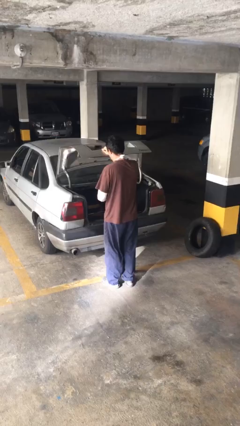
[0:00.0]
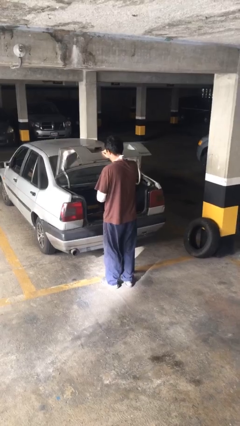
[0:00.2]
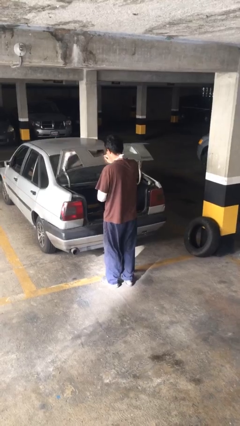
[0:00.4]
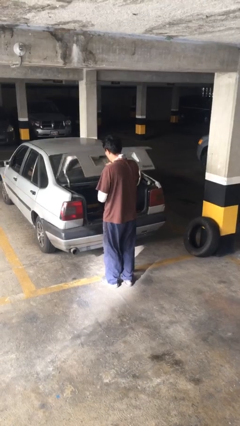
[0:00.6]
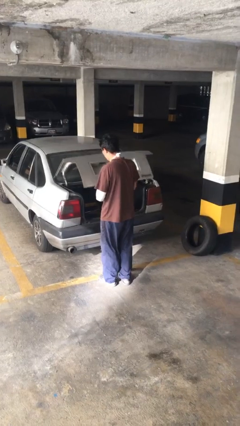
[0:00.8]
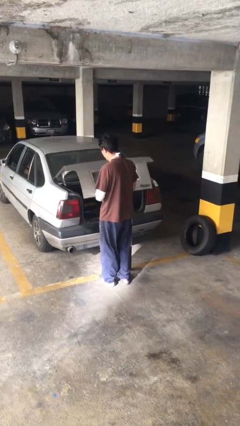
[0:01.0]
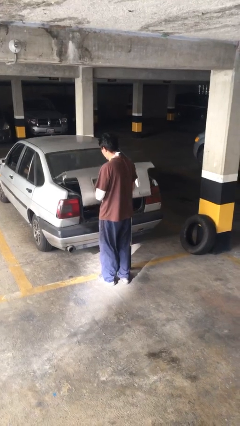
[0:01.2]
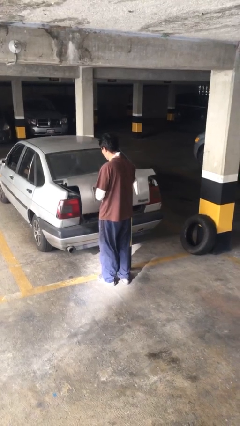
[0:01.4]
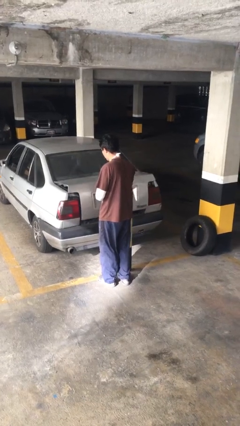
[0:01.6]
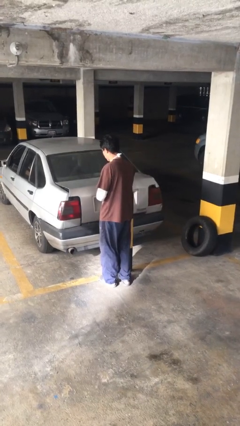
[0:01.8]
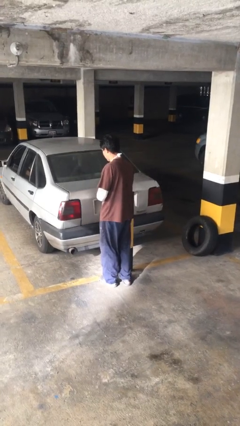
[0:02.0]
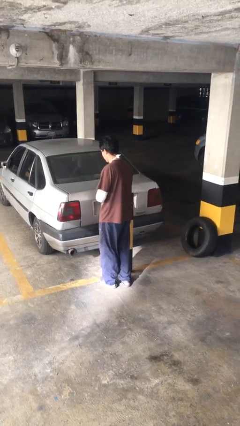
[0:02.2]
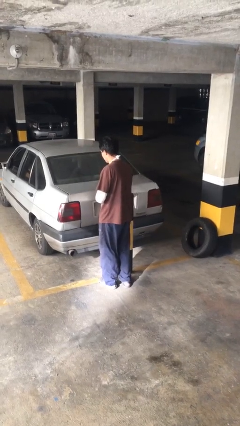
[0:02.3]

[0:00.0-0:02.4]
person closes car trunk

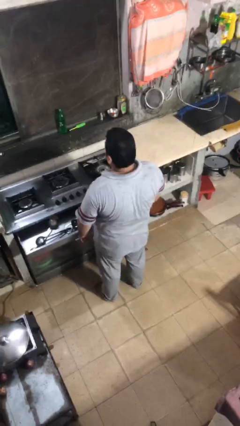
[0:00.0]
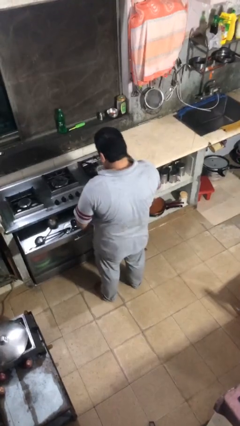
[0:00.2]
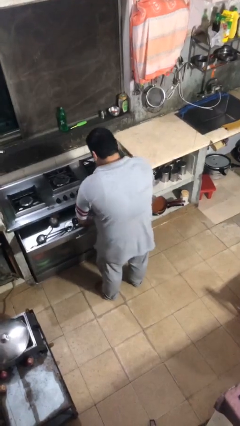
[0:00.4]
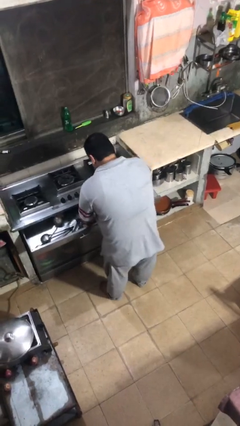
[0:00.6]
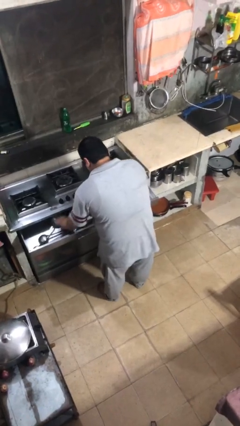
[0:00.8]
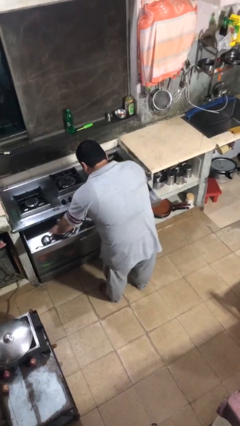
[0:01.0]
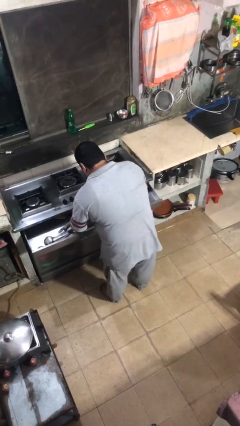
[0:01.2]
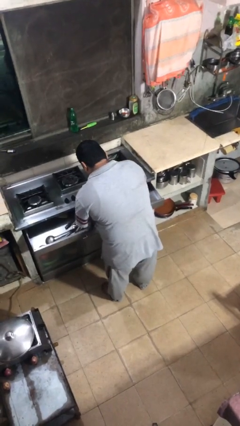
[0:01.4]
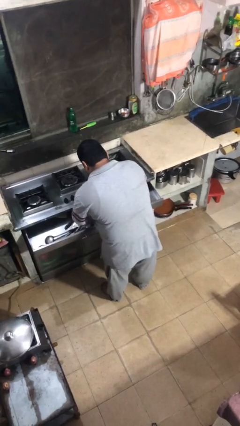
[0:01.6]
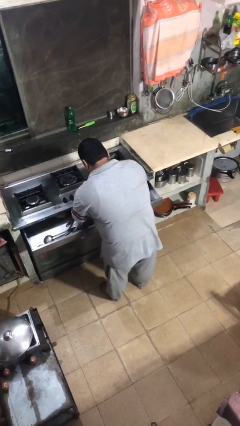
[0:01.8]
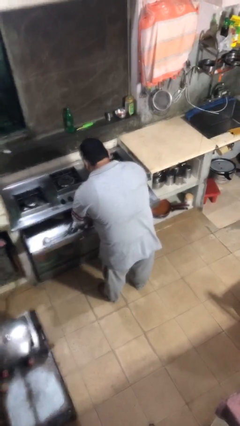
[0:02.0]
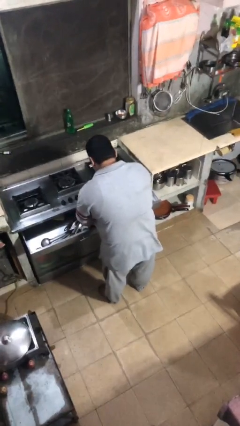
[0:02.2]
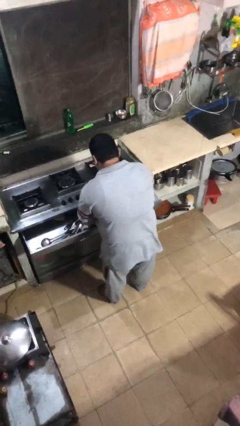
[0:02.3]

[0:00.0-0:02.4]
person searches in kitchen drawer

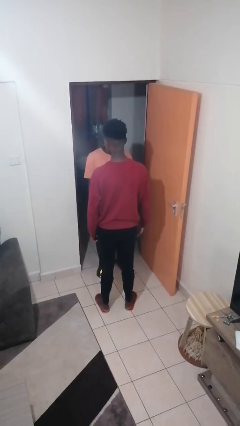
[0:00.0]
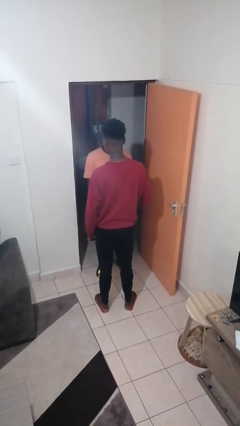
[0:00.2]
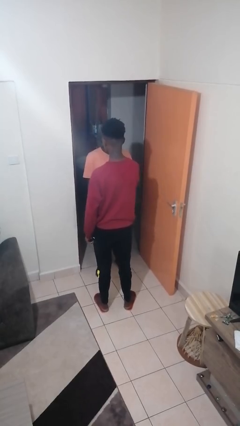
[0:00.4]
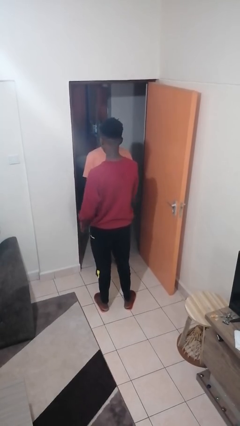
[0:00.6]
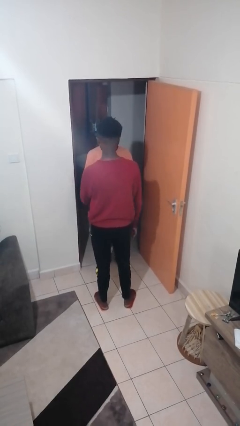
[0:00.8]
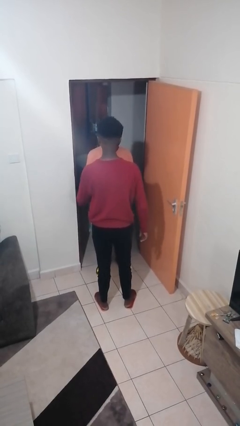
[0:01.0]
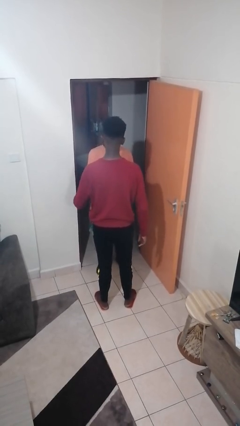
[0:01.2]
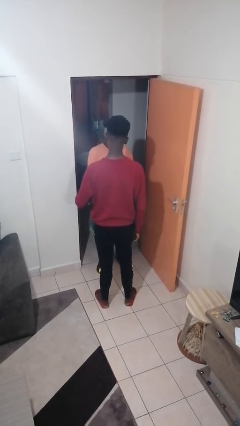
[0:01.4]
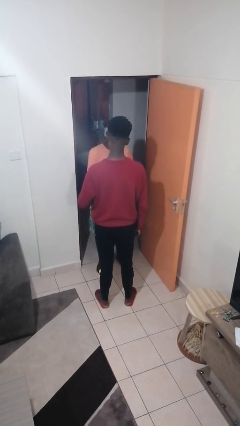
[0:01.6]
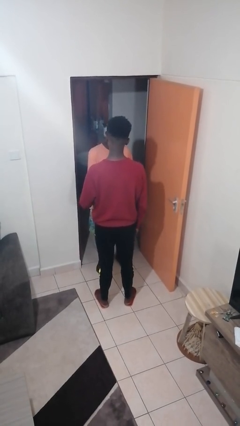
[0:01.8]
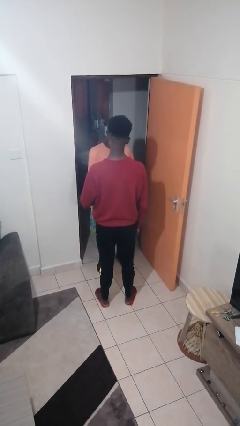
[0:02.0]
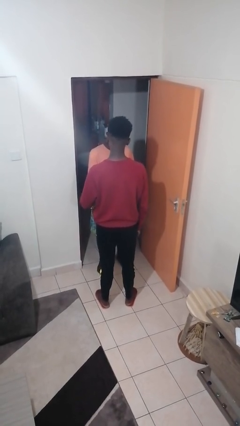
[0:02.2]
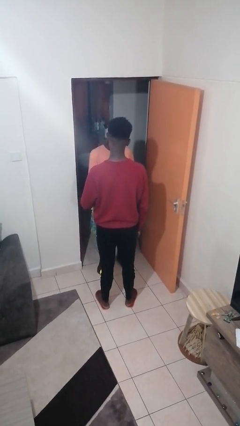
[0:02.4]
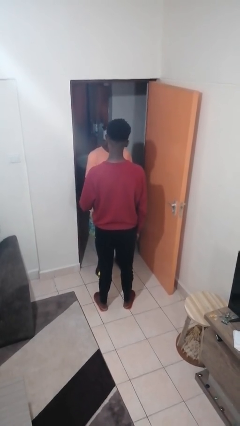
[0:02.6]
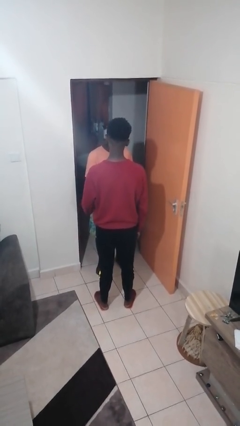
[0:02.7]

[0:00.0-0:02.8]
person grabs person by forearm

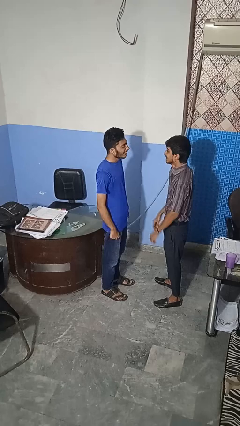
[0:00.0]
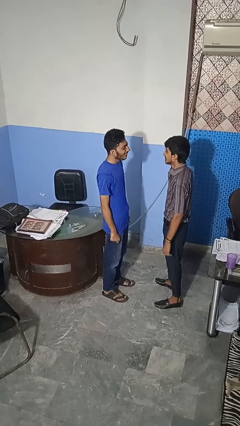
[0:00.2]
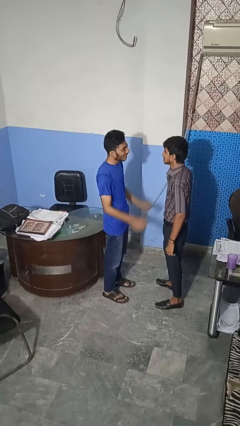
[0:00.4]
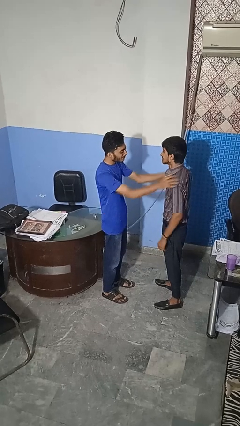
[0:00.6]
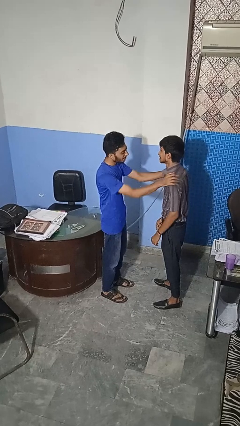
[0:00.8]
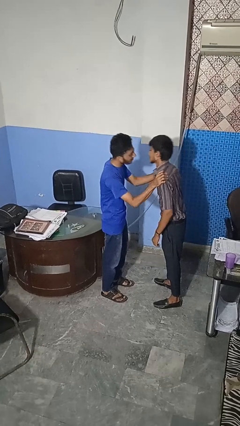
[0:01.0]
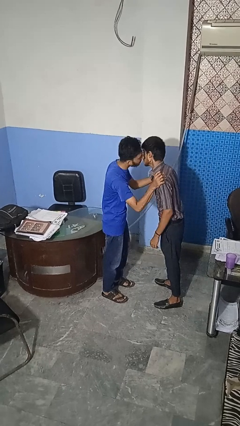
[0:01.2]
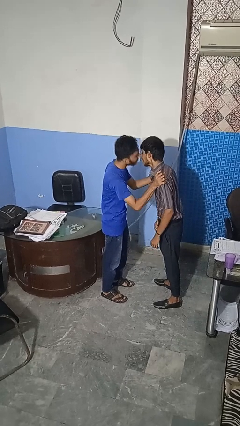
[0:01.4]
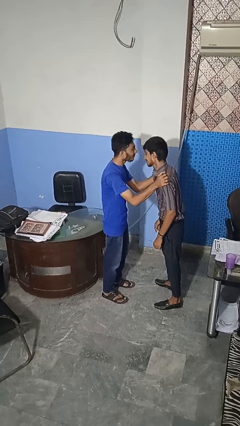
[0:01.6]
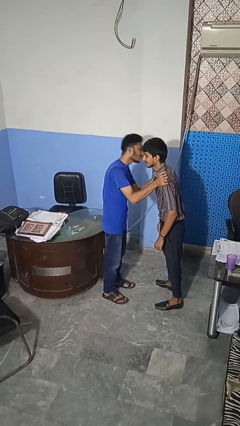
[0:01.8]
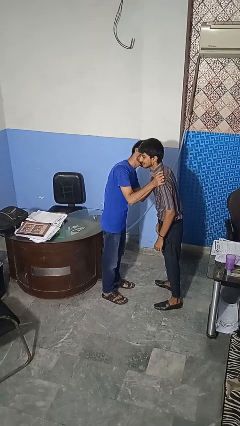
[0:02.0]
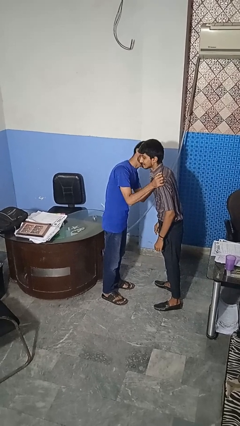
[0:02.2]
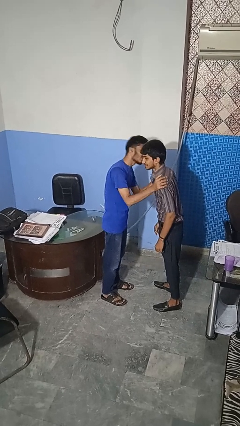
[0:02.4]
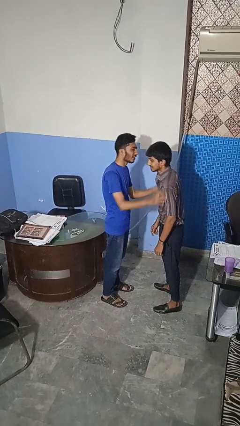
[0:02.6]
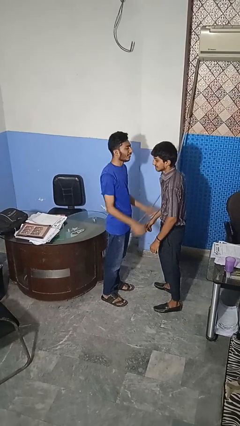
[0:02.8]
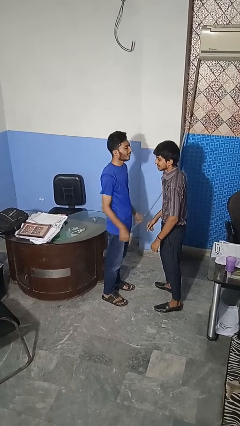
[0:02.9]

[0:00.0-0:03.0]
person kisses cheek of person

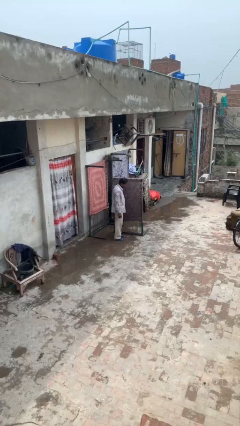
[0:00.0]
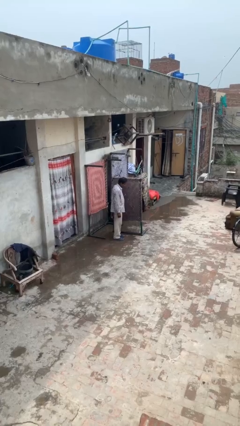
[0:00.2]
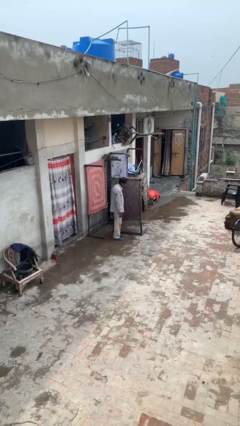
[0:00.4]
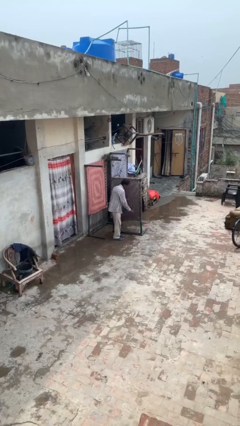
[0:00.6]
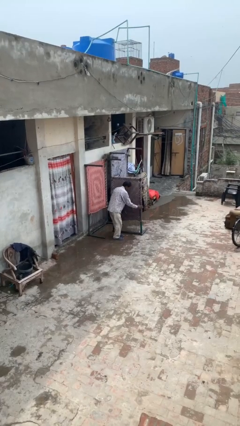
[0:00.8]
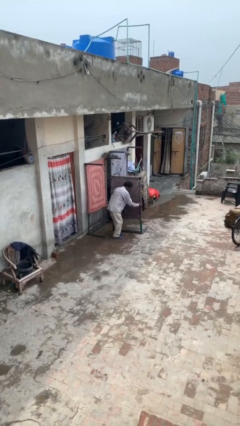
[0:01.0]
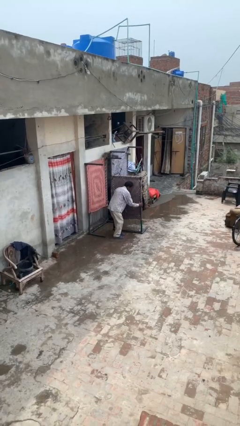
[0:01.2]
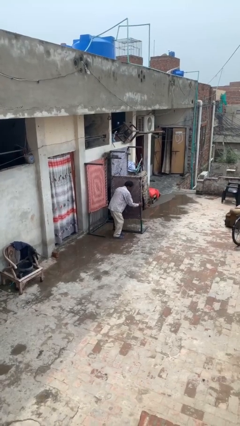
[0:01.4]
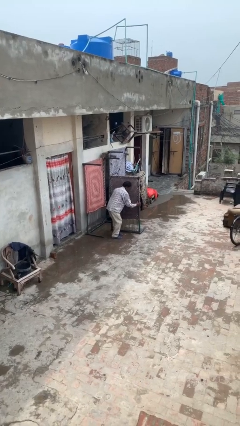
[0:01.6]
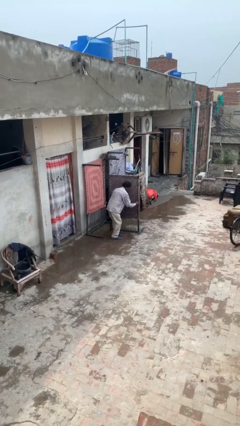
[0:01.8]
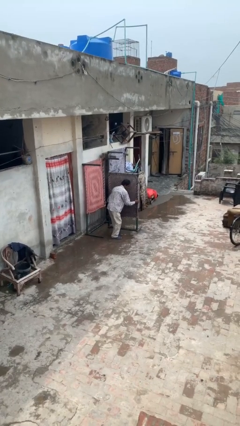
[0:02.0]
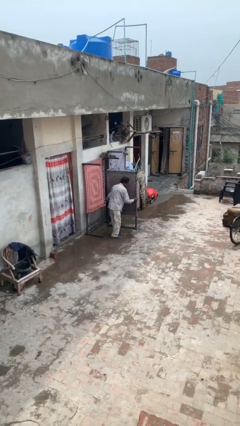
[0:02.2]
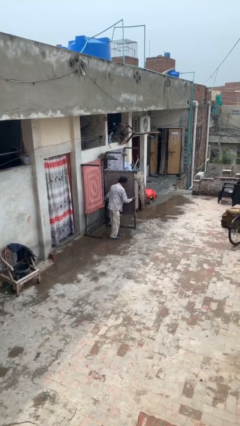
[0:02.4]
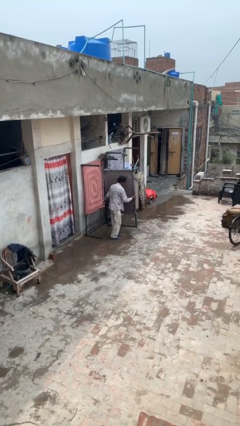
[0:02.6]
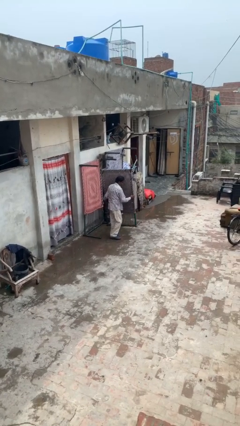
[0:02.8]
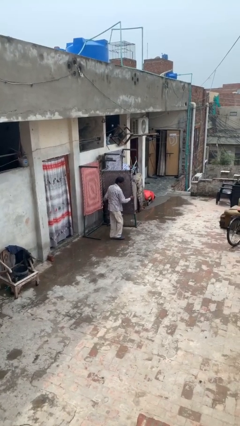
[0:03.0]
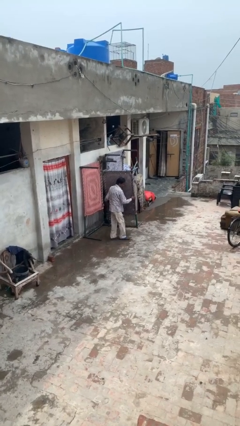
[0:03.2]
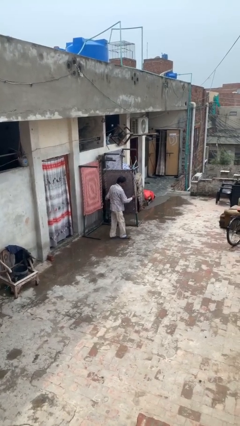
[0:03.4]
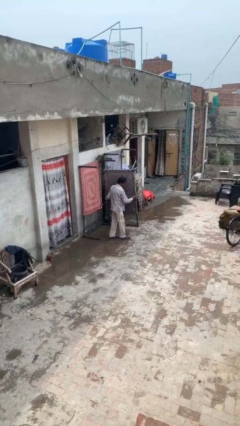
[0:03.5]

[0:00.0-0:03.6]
person picks up object from floor

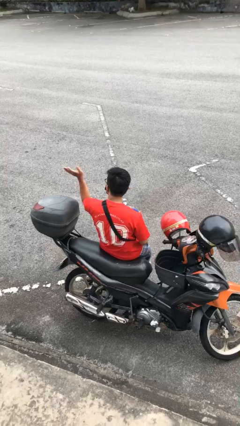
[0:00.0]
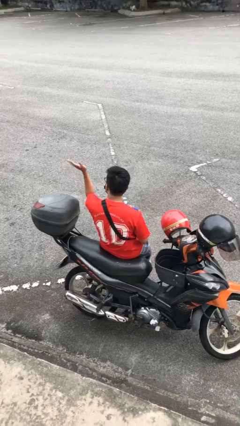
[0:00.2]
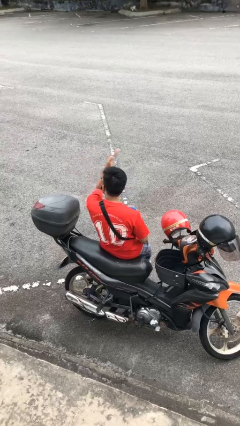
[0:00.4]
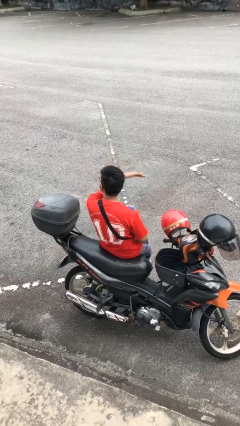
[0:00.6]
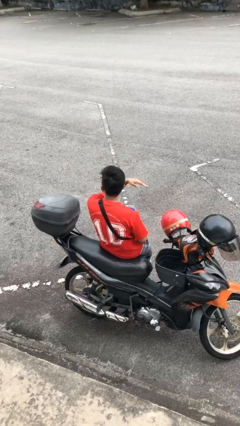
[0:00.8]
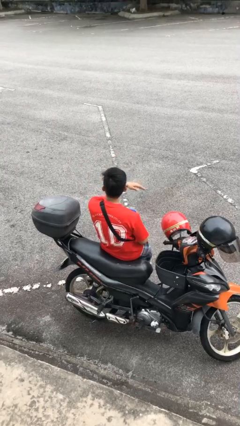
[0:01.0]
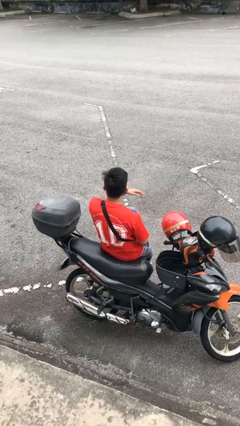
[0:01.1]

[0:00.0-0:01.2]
person gestures swipe right

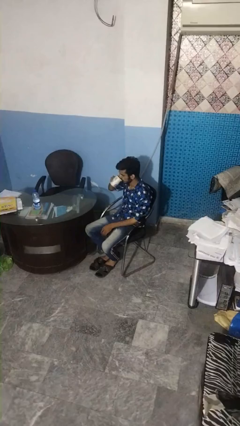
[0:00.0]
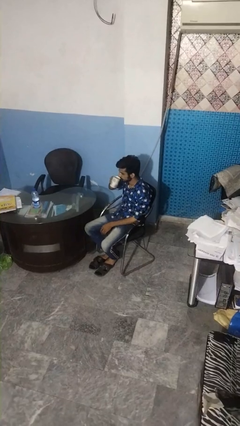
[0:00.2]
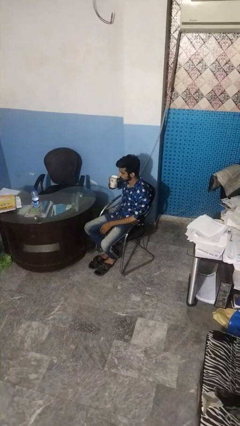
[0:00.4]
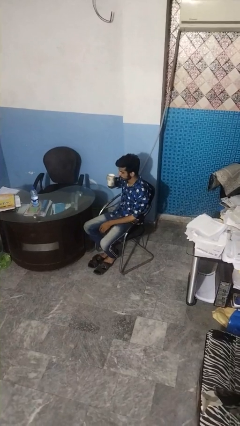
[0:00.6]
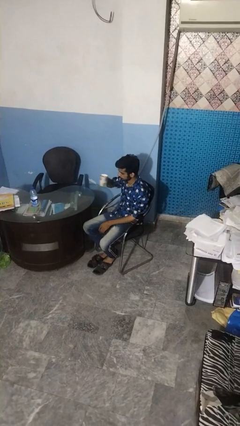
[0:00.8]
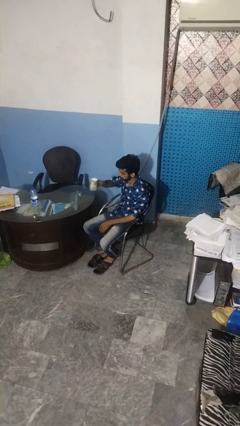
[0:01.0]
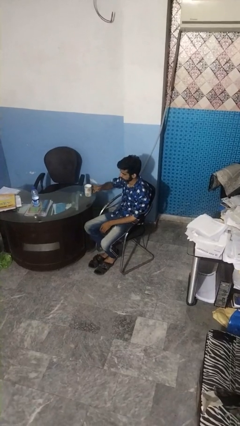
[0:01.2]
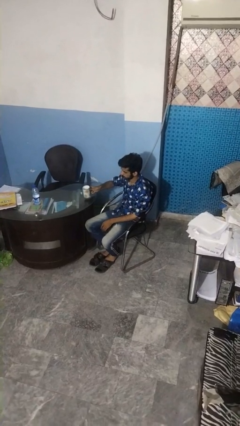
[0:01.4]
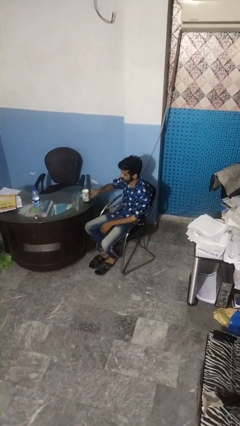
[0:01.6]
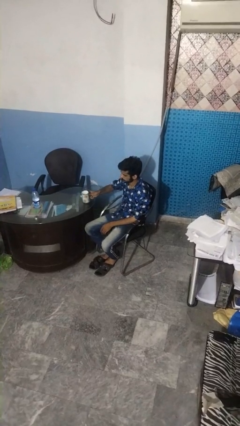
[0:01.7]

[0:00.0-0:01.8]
person puts down object on table
